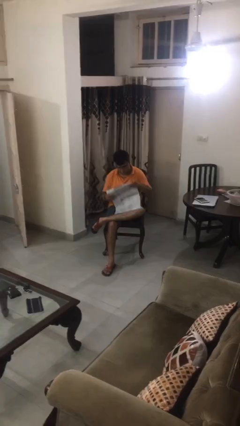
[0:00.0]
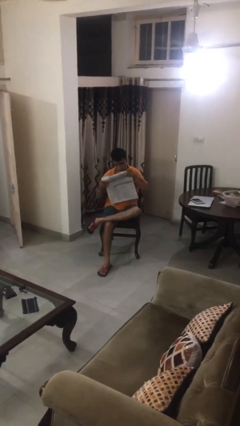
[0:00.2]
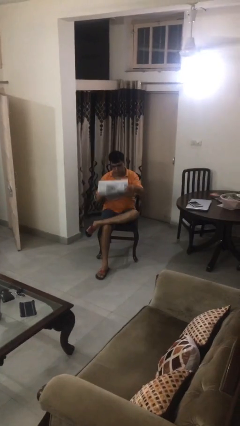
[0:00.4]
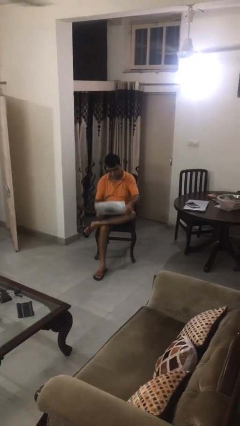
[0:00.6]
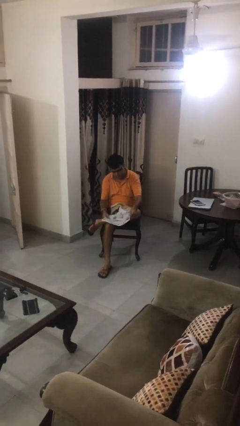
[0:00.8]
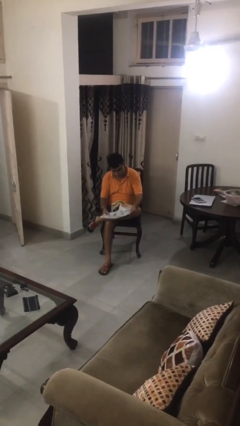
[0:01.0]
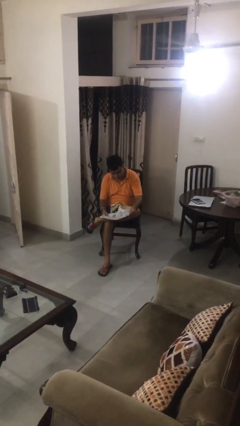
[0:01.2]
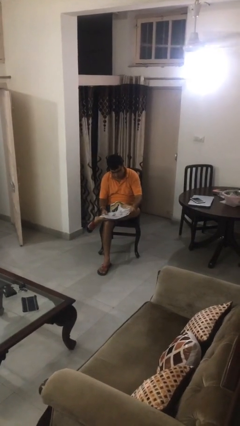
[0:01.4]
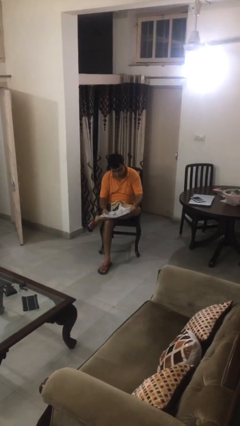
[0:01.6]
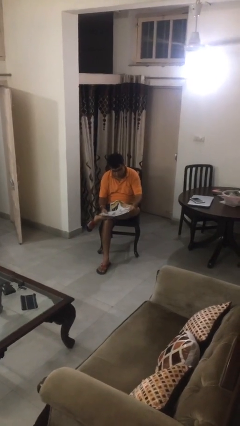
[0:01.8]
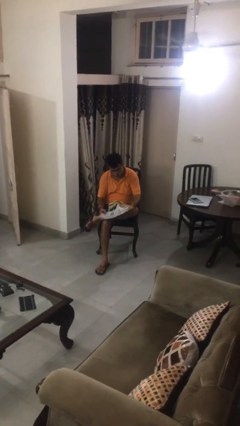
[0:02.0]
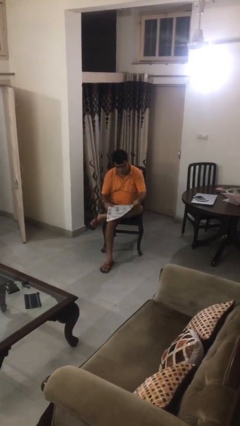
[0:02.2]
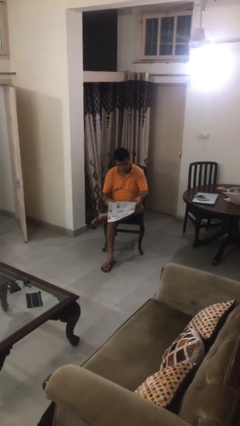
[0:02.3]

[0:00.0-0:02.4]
person reads newspaper

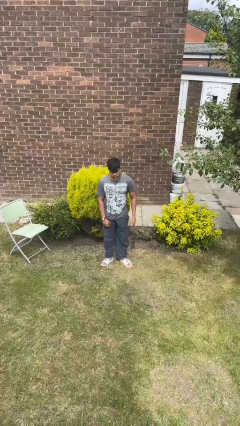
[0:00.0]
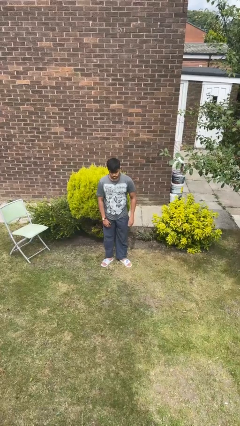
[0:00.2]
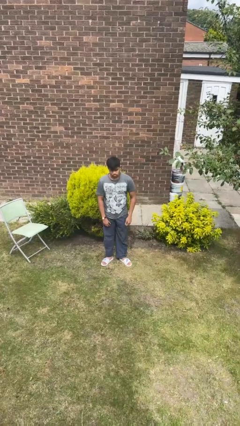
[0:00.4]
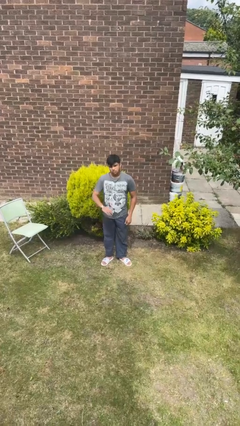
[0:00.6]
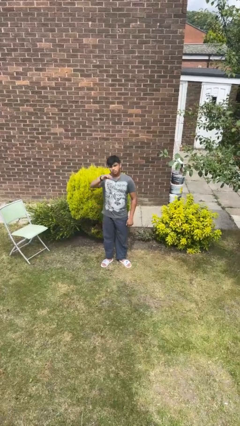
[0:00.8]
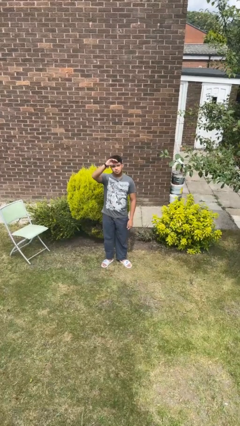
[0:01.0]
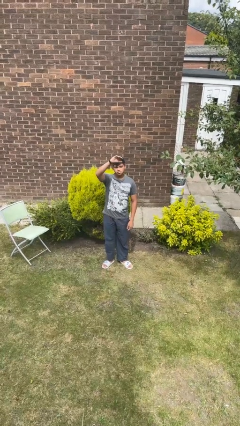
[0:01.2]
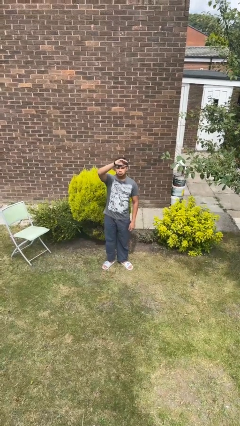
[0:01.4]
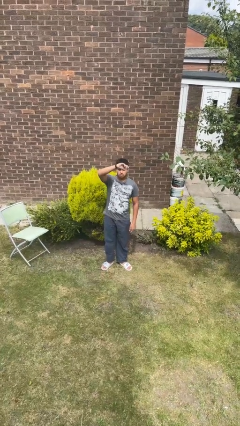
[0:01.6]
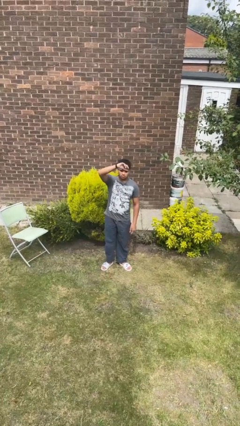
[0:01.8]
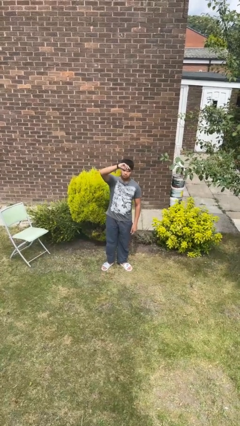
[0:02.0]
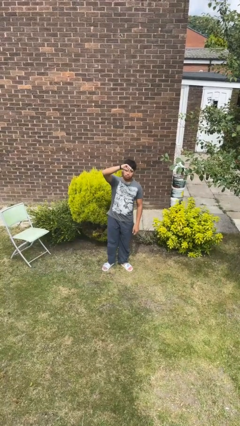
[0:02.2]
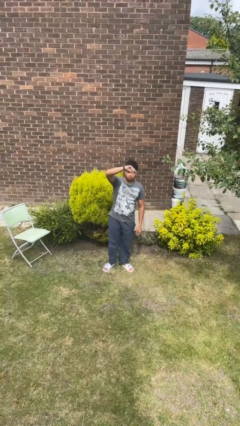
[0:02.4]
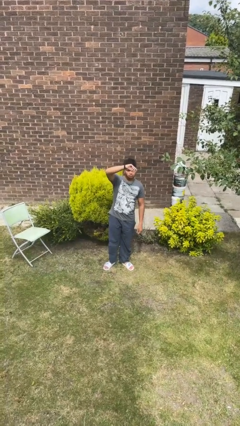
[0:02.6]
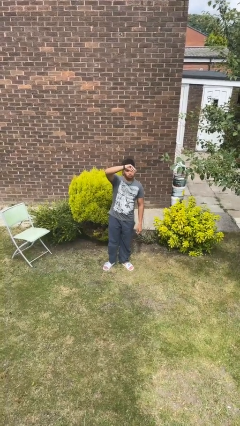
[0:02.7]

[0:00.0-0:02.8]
person gestures raise hand

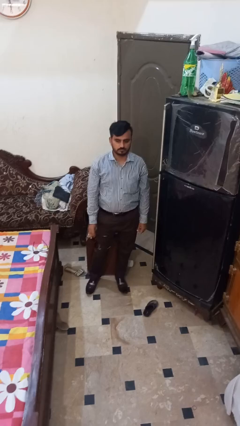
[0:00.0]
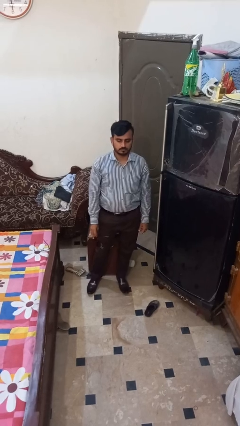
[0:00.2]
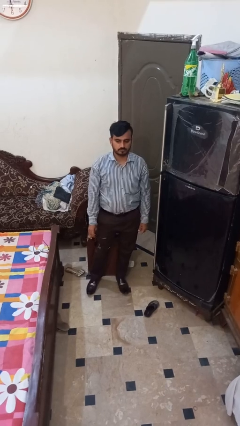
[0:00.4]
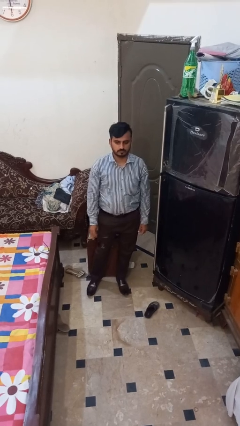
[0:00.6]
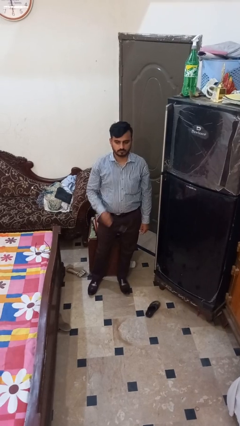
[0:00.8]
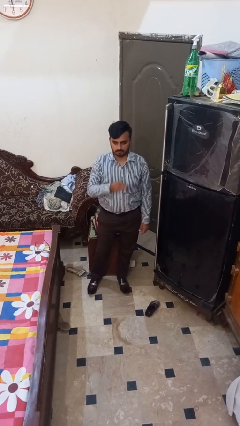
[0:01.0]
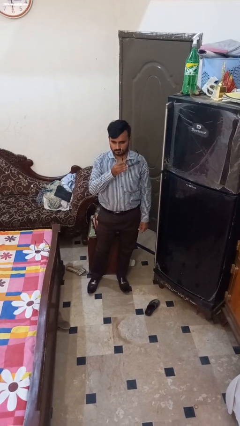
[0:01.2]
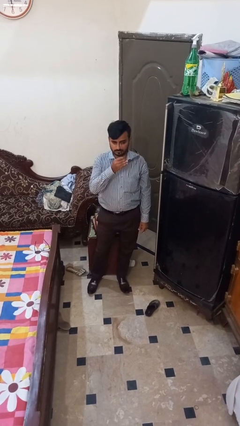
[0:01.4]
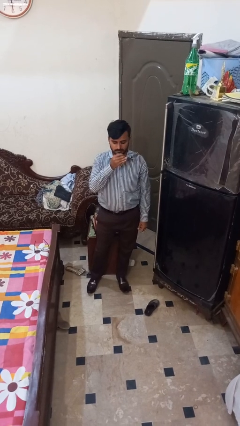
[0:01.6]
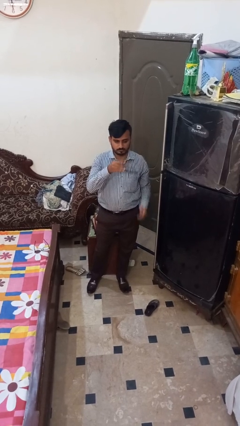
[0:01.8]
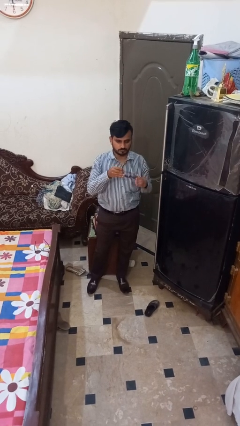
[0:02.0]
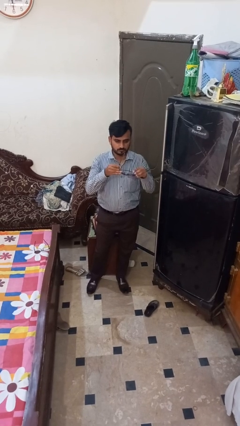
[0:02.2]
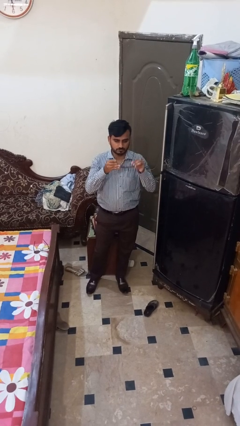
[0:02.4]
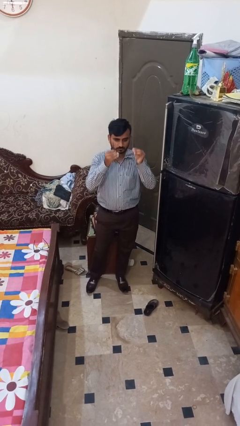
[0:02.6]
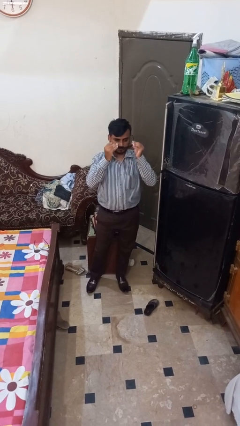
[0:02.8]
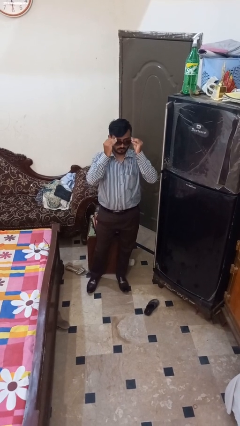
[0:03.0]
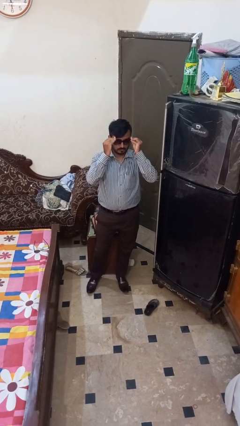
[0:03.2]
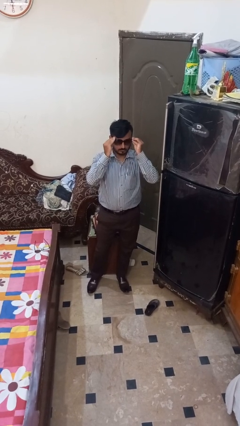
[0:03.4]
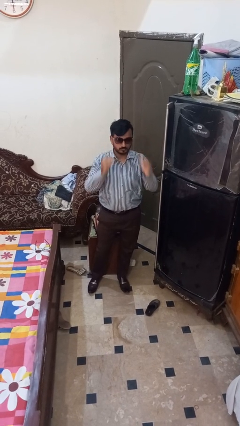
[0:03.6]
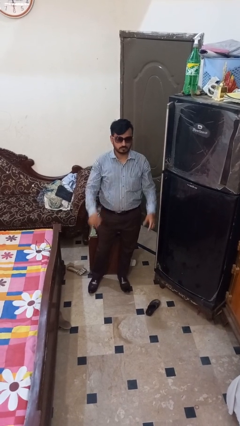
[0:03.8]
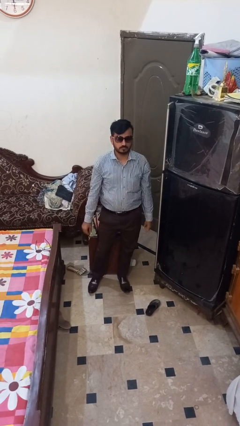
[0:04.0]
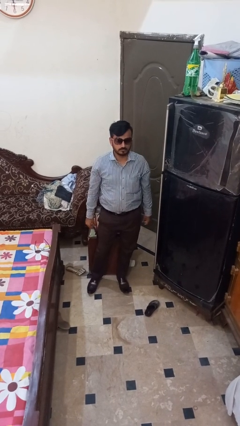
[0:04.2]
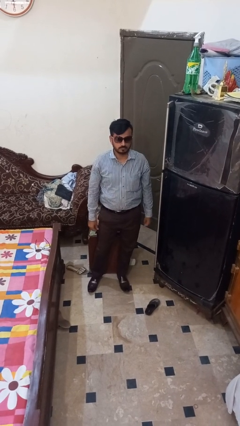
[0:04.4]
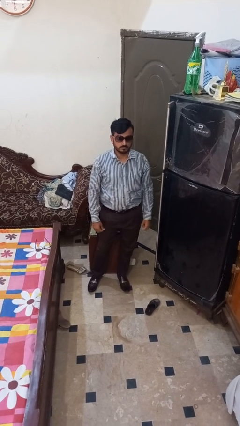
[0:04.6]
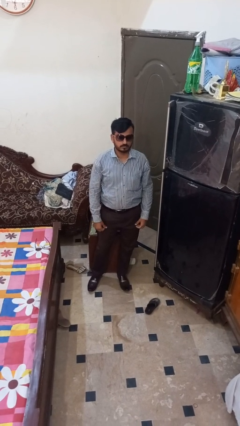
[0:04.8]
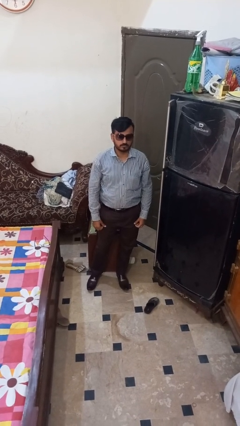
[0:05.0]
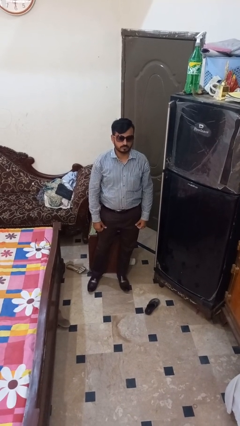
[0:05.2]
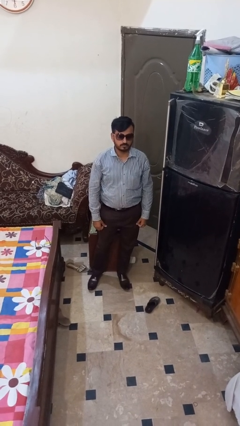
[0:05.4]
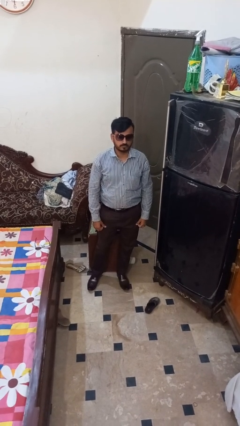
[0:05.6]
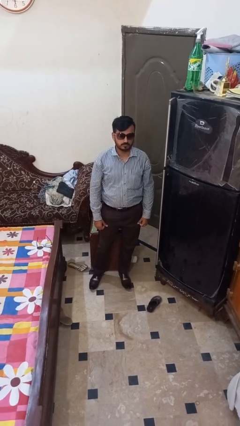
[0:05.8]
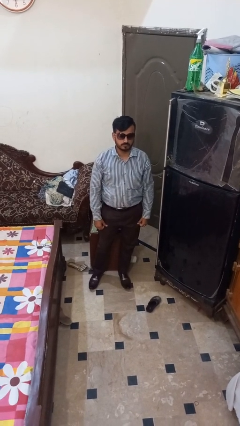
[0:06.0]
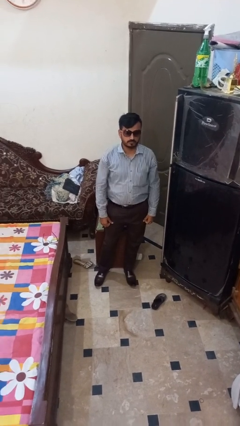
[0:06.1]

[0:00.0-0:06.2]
person puts on sunglasses

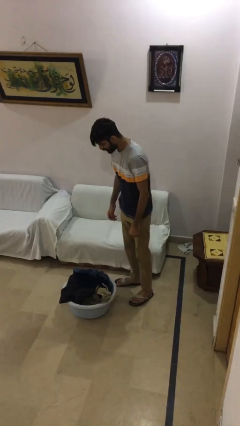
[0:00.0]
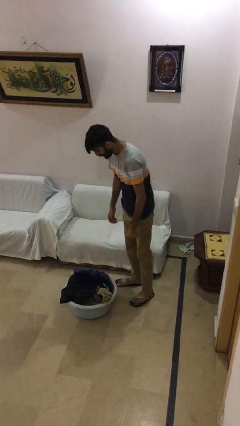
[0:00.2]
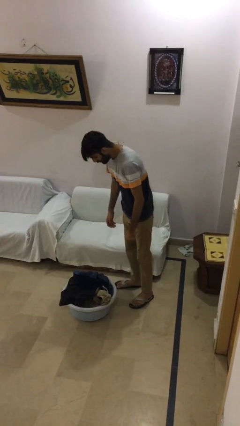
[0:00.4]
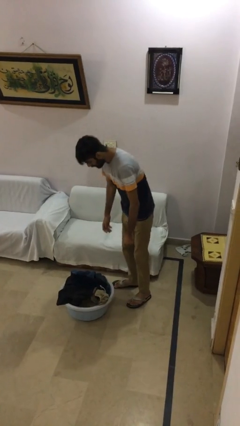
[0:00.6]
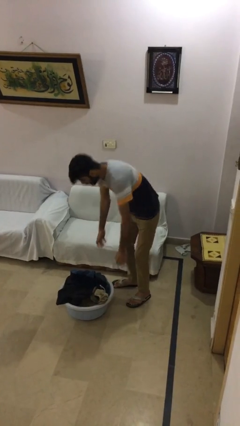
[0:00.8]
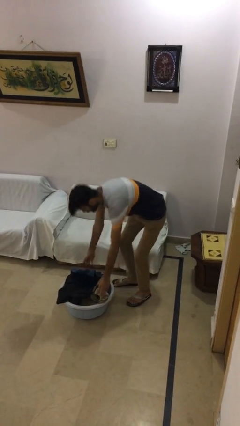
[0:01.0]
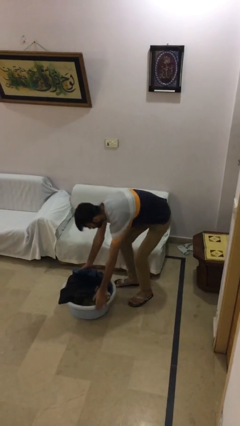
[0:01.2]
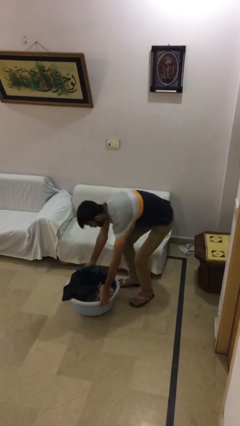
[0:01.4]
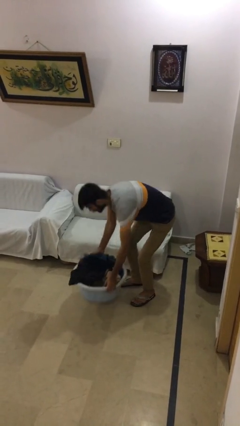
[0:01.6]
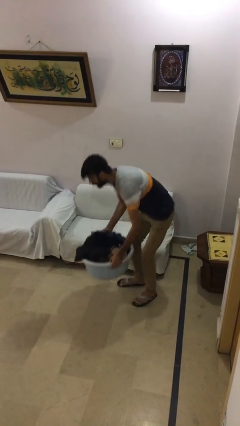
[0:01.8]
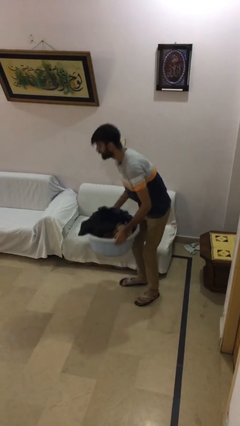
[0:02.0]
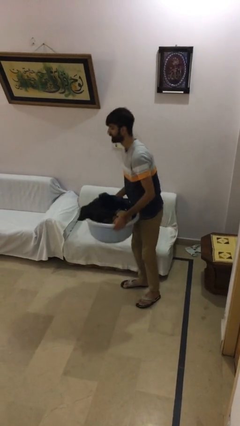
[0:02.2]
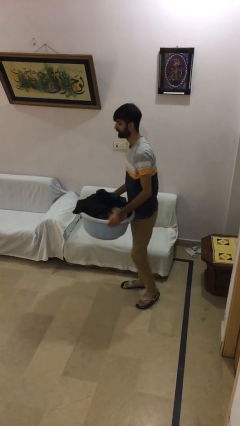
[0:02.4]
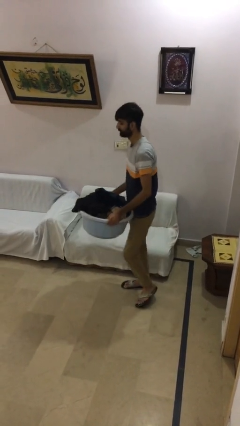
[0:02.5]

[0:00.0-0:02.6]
person picks up object from floor

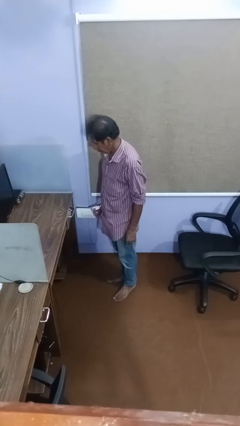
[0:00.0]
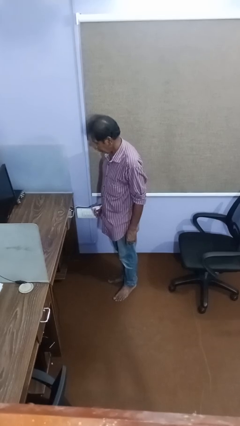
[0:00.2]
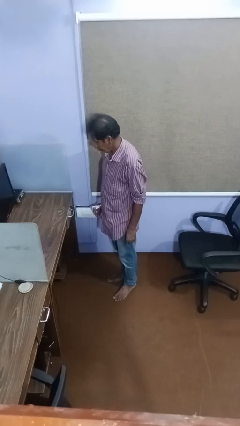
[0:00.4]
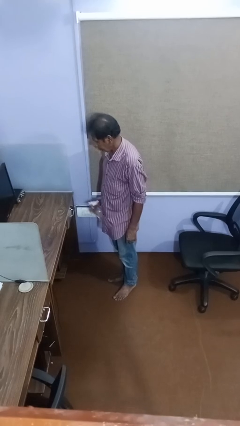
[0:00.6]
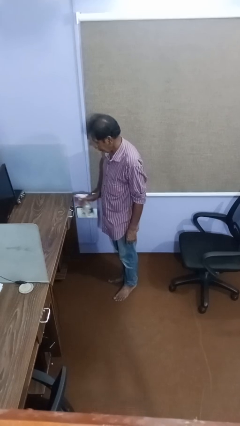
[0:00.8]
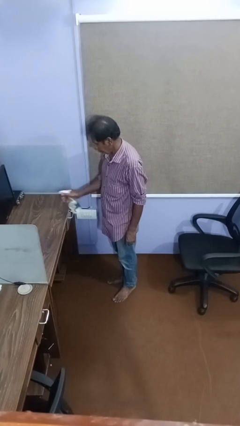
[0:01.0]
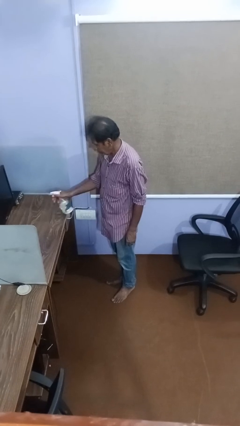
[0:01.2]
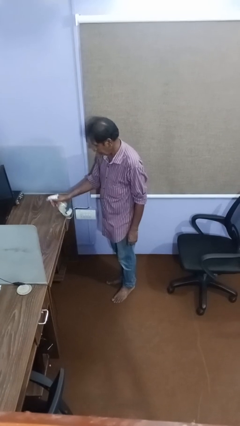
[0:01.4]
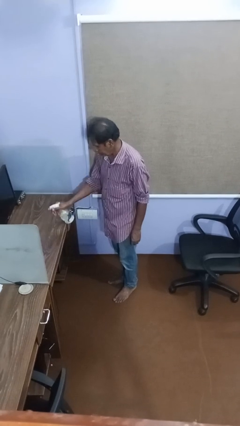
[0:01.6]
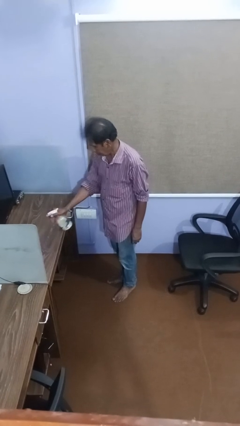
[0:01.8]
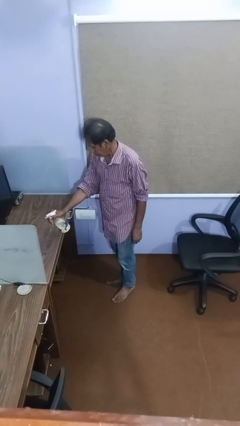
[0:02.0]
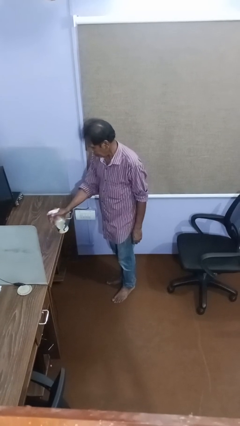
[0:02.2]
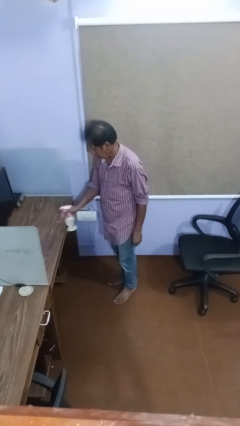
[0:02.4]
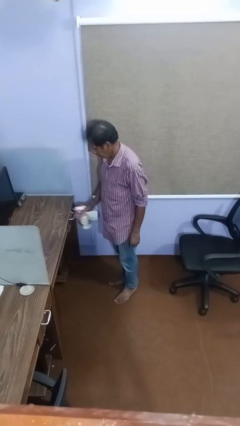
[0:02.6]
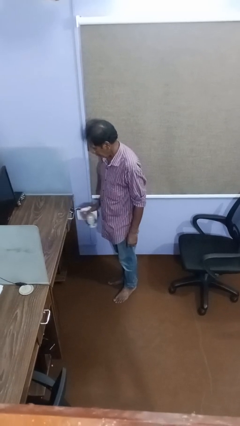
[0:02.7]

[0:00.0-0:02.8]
person sprays from bottle

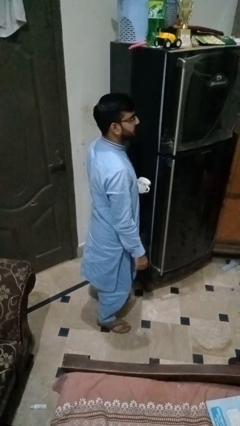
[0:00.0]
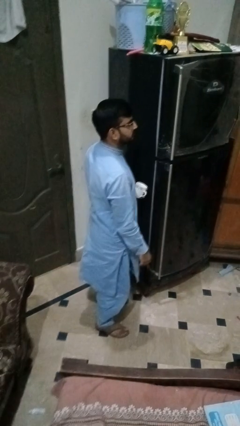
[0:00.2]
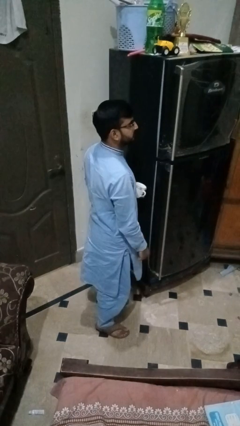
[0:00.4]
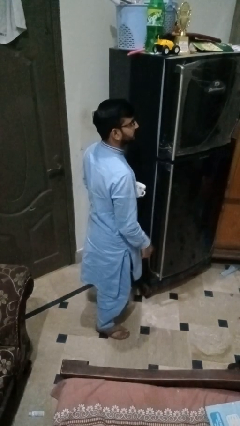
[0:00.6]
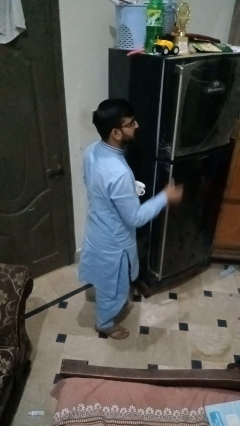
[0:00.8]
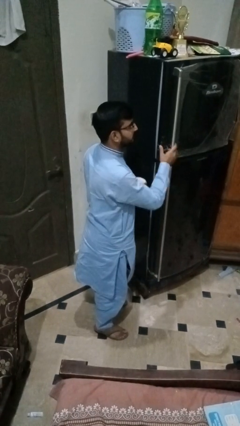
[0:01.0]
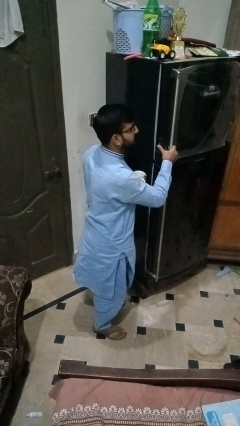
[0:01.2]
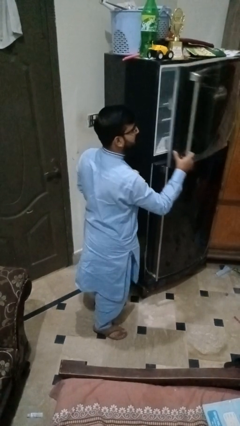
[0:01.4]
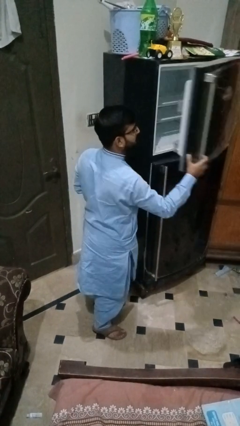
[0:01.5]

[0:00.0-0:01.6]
person puts object into refrigerator
